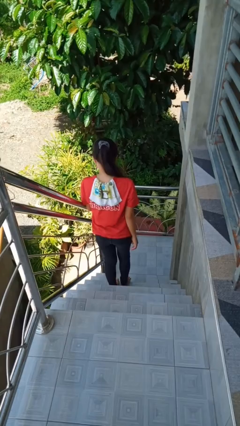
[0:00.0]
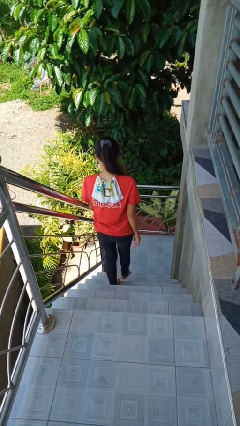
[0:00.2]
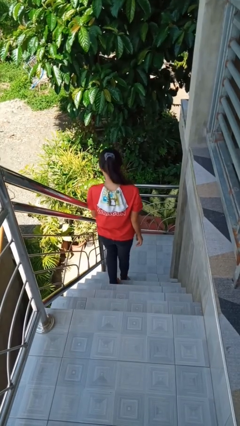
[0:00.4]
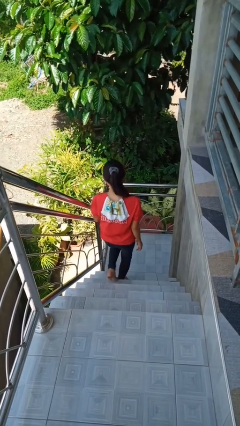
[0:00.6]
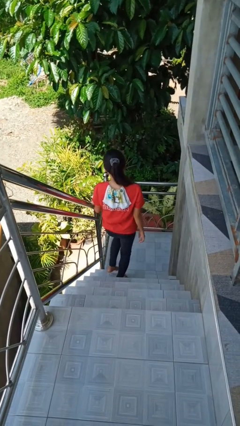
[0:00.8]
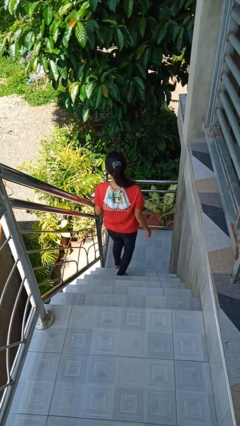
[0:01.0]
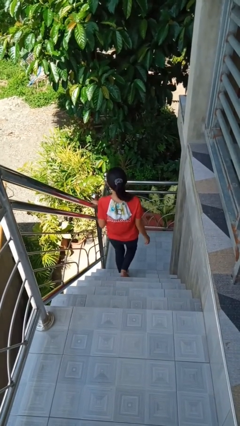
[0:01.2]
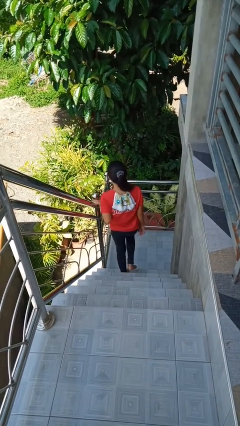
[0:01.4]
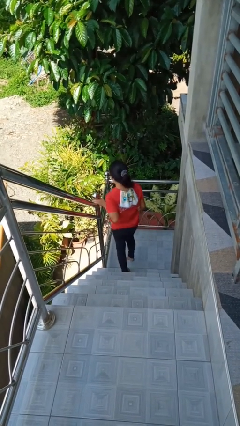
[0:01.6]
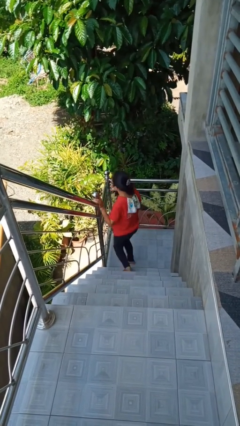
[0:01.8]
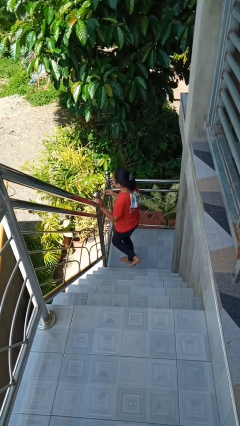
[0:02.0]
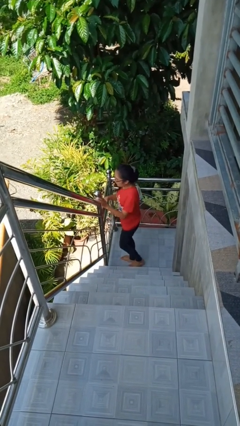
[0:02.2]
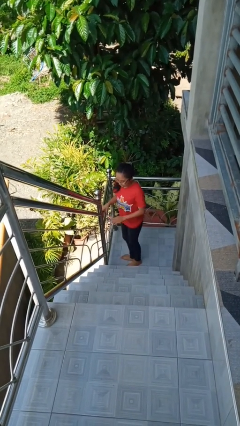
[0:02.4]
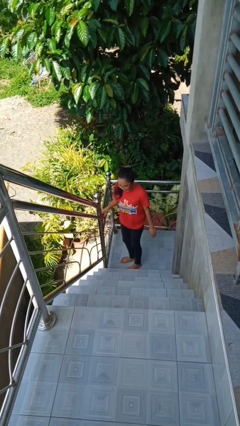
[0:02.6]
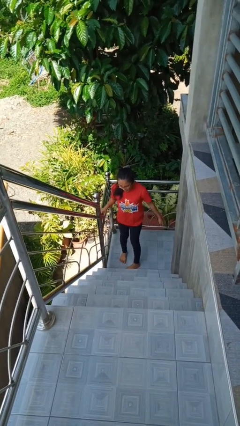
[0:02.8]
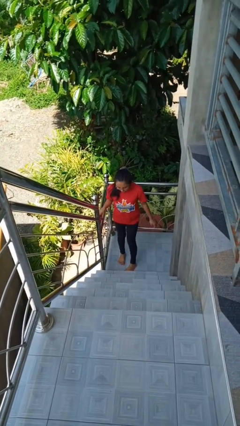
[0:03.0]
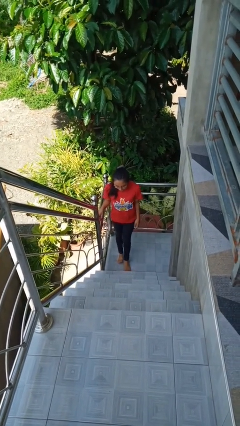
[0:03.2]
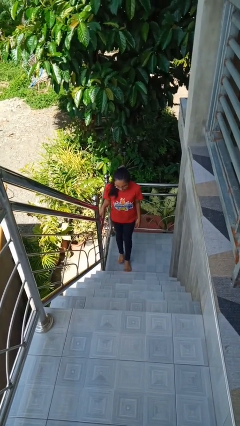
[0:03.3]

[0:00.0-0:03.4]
person climbs down stairs

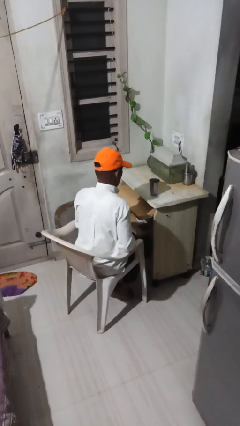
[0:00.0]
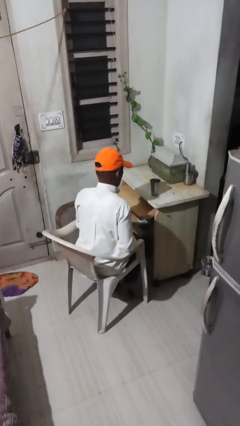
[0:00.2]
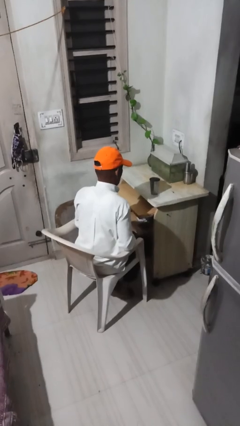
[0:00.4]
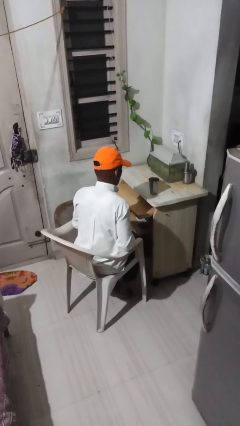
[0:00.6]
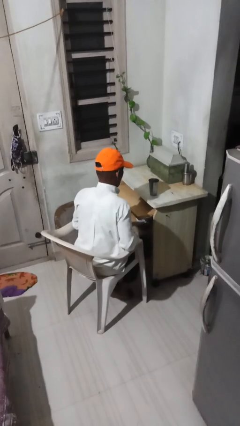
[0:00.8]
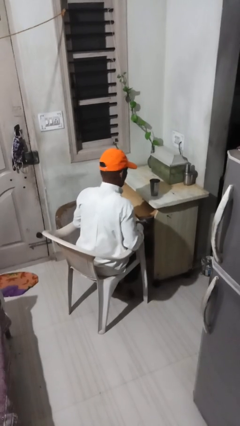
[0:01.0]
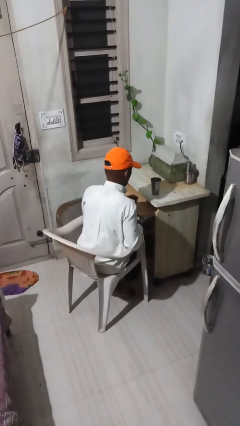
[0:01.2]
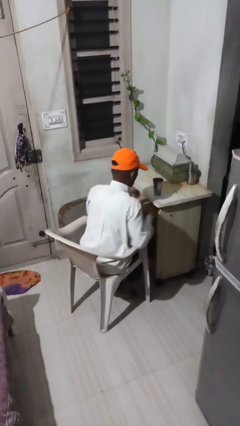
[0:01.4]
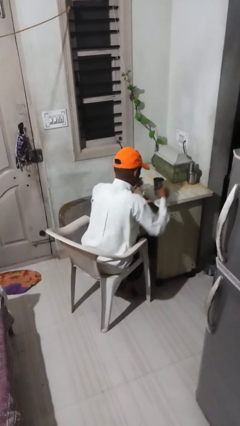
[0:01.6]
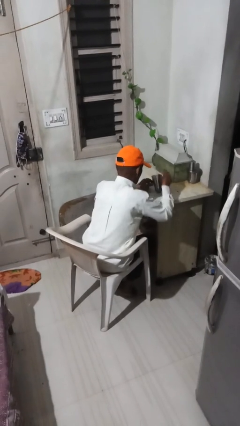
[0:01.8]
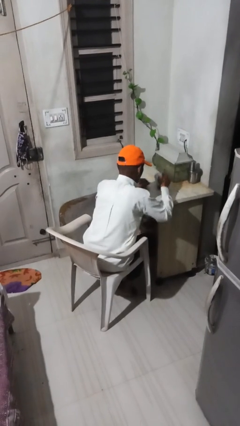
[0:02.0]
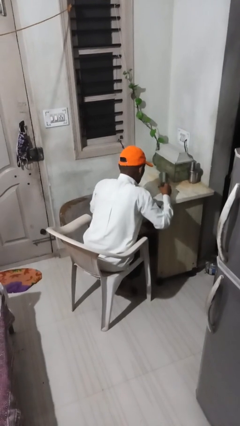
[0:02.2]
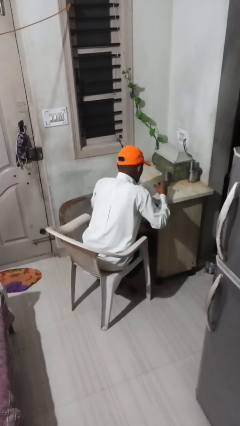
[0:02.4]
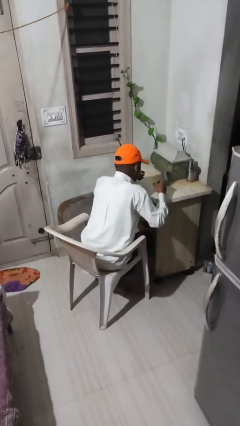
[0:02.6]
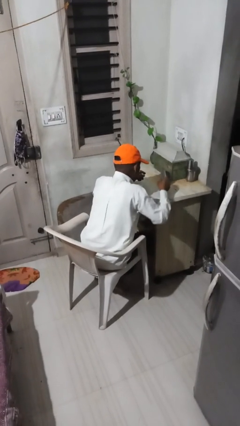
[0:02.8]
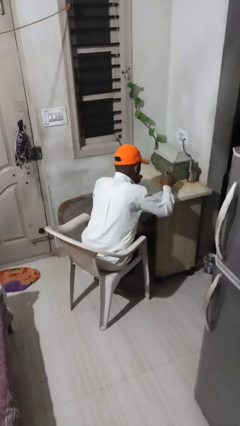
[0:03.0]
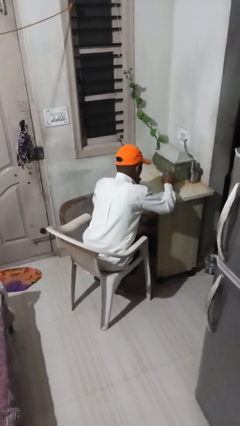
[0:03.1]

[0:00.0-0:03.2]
person knocks over glass

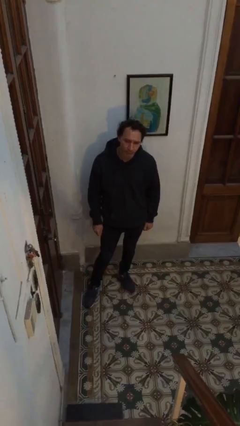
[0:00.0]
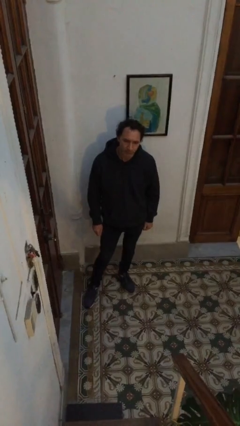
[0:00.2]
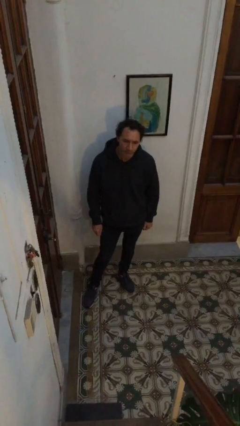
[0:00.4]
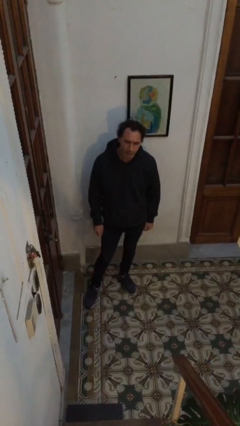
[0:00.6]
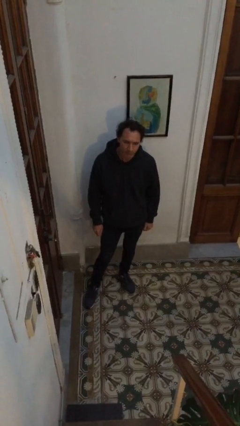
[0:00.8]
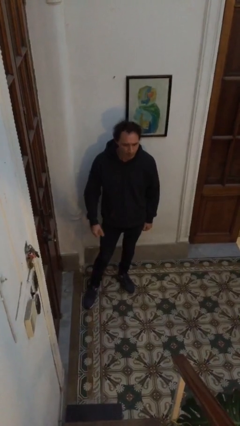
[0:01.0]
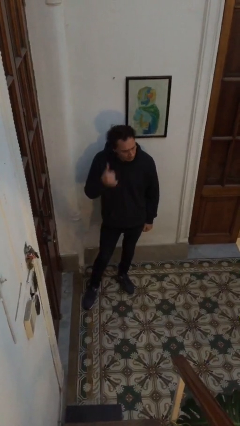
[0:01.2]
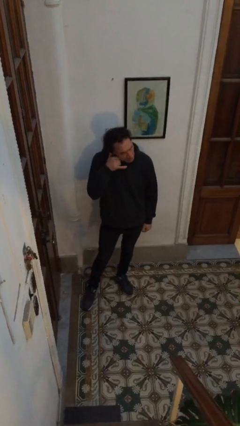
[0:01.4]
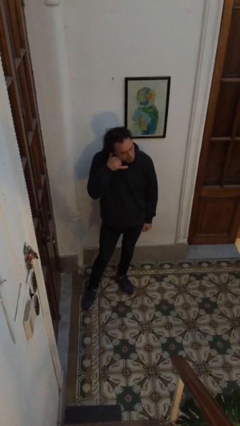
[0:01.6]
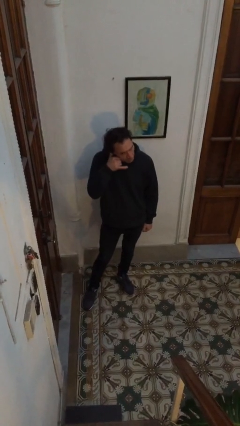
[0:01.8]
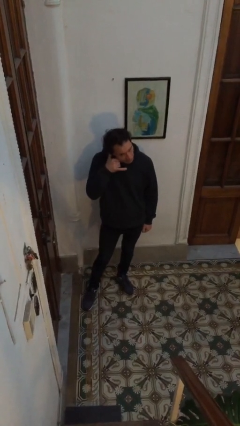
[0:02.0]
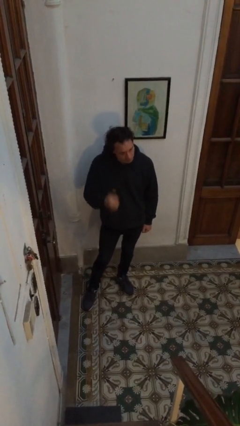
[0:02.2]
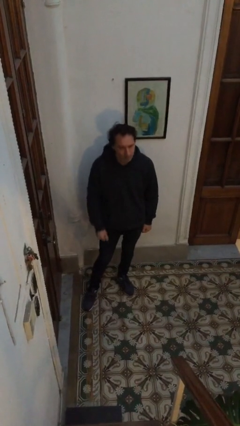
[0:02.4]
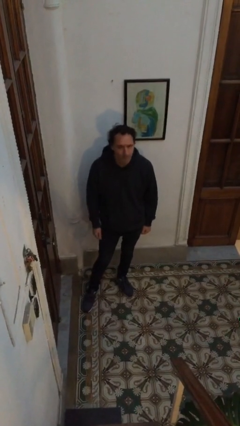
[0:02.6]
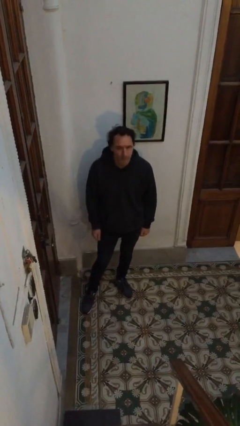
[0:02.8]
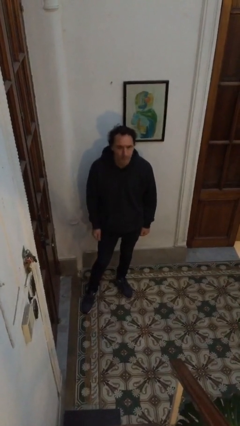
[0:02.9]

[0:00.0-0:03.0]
person gestures call me

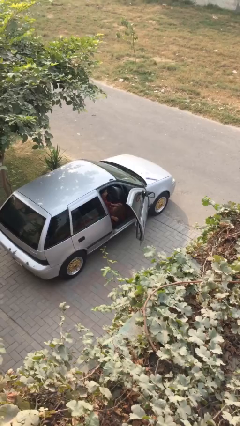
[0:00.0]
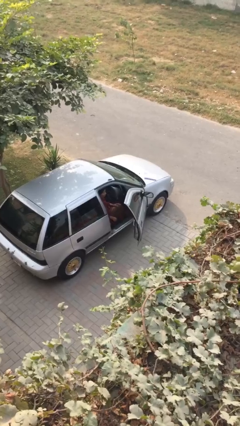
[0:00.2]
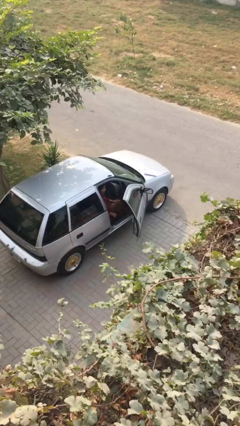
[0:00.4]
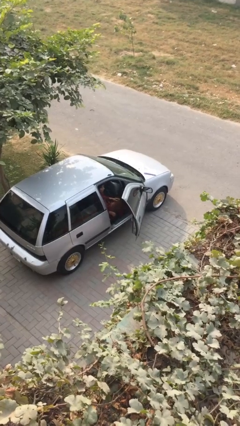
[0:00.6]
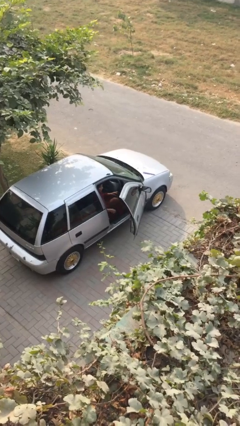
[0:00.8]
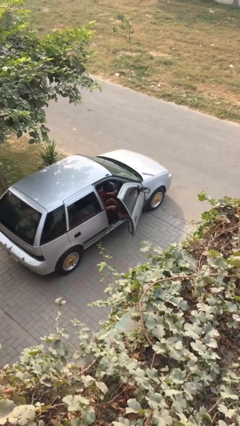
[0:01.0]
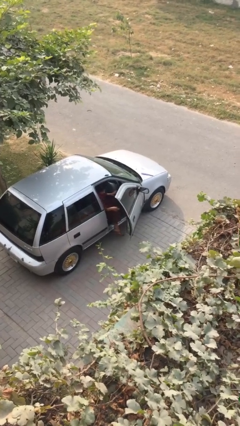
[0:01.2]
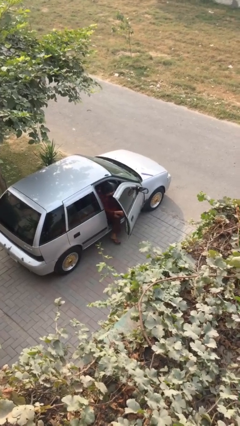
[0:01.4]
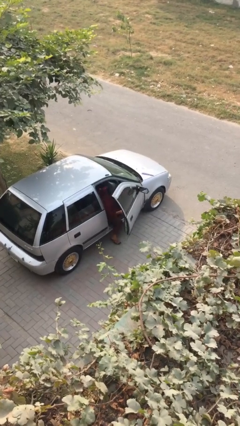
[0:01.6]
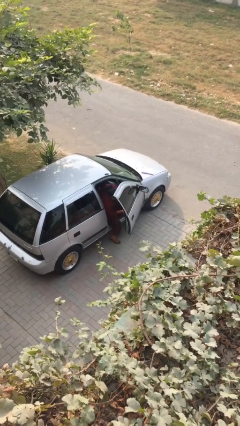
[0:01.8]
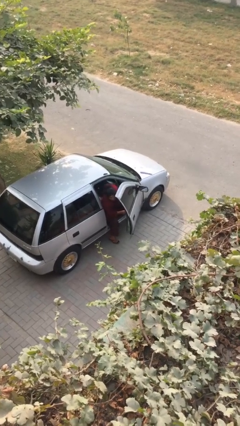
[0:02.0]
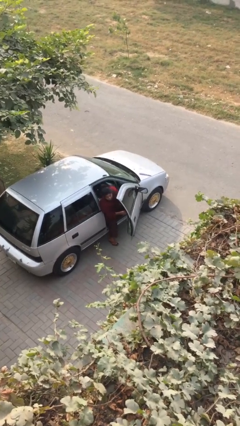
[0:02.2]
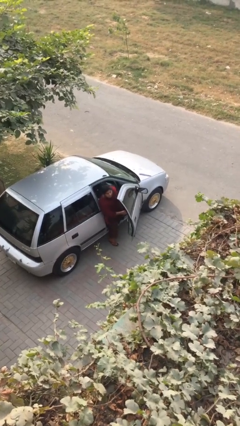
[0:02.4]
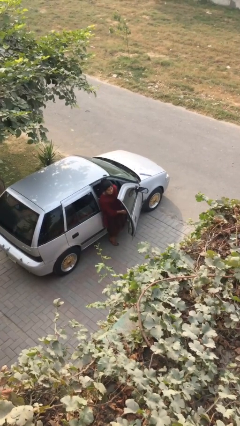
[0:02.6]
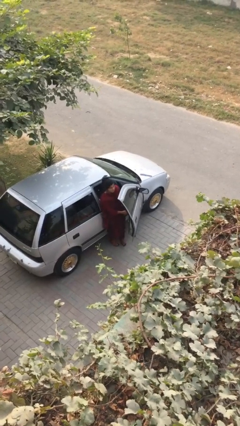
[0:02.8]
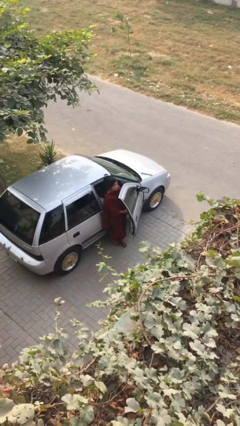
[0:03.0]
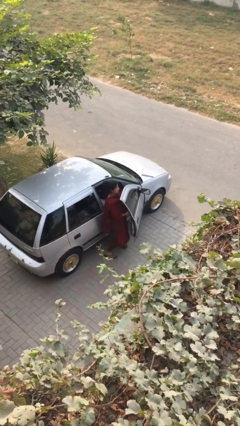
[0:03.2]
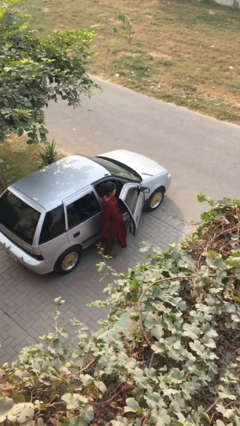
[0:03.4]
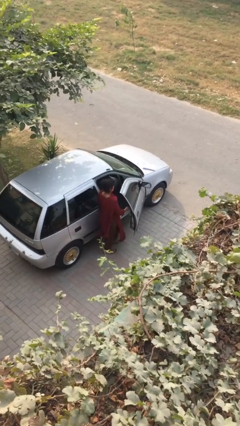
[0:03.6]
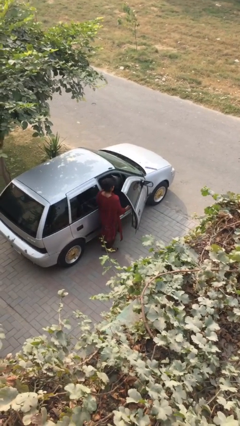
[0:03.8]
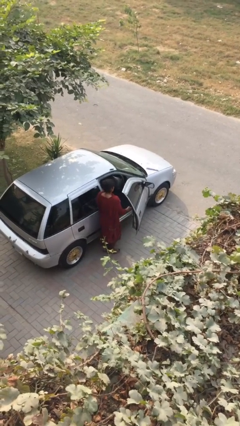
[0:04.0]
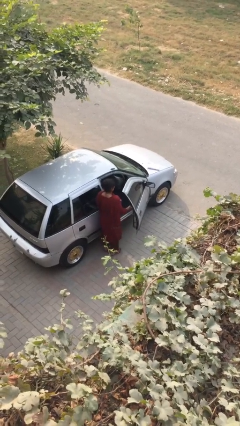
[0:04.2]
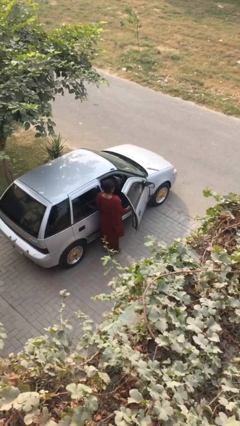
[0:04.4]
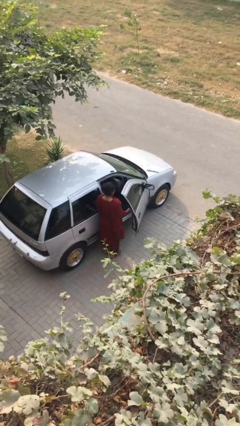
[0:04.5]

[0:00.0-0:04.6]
person exits car

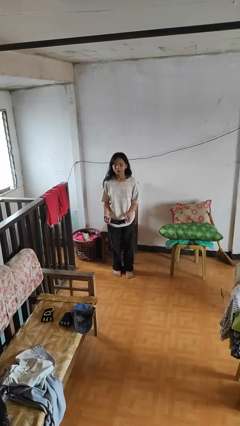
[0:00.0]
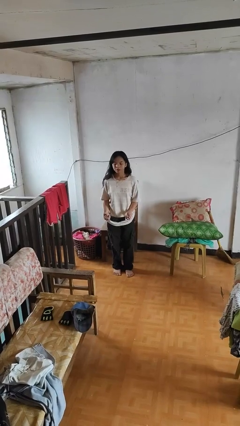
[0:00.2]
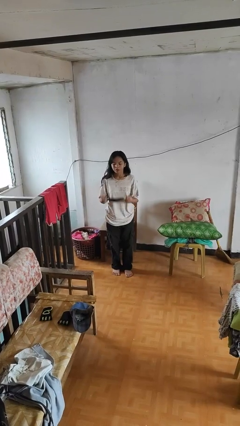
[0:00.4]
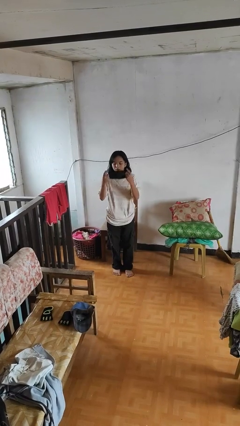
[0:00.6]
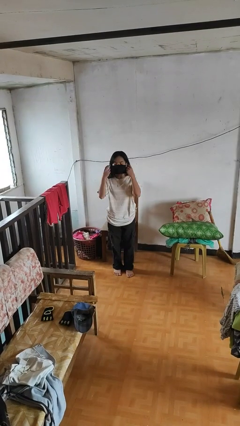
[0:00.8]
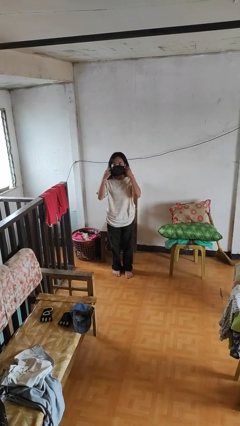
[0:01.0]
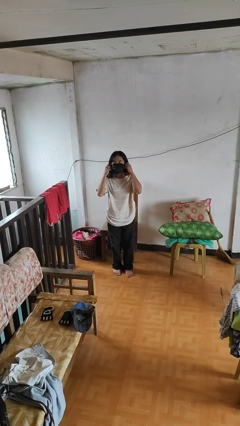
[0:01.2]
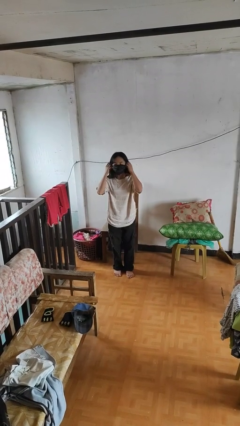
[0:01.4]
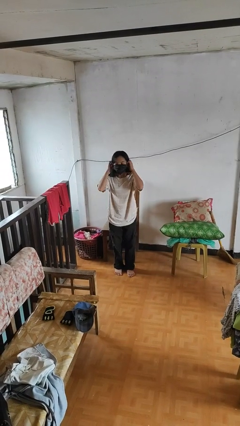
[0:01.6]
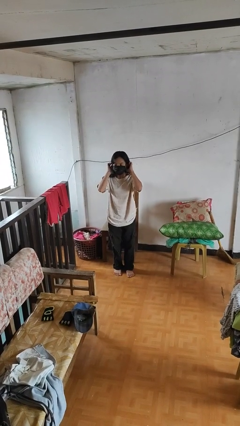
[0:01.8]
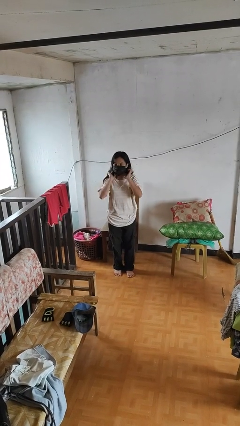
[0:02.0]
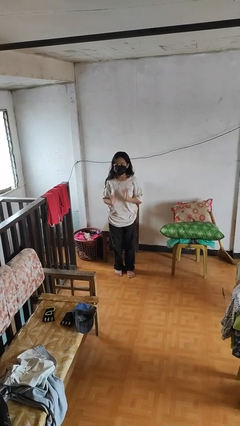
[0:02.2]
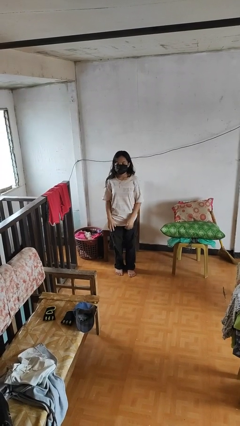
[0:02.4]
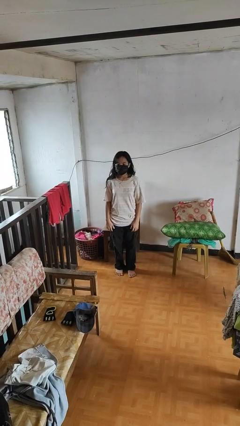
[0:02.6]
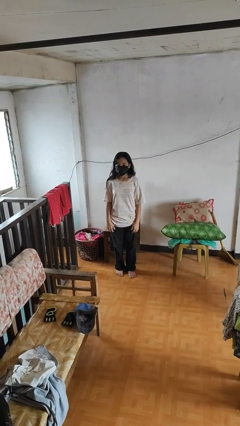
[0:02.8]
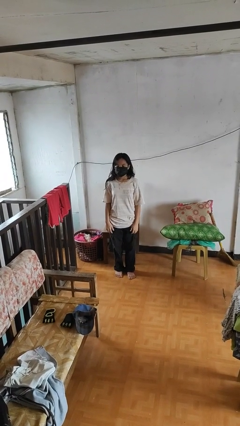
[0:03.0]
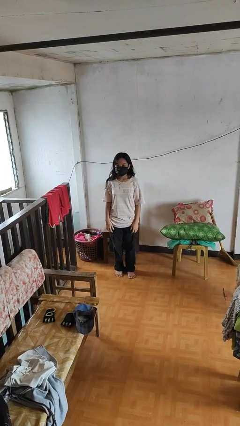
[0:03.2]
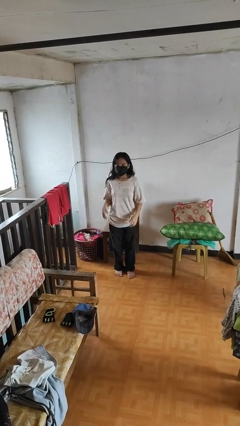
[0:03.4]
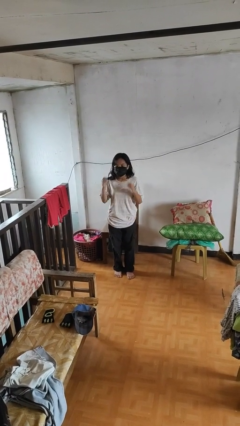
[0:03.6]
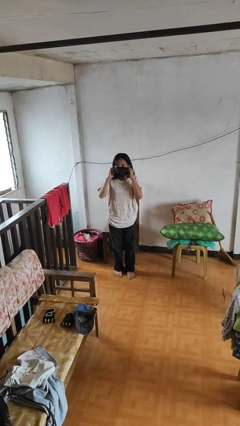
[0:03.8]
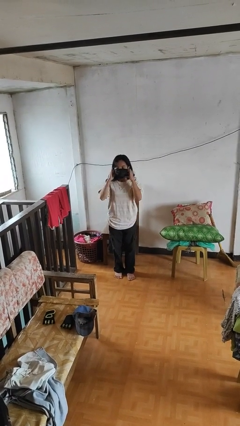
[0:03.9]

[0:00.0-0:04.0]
person puts on facemask
